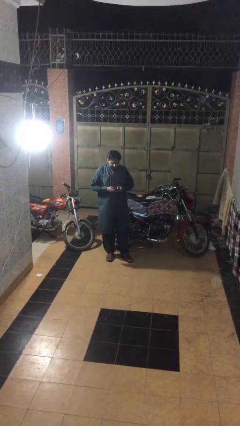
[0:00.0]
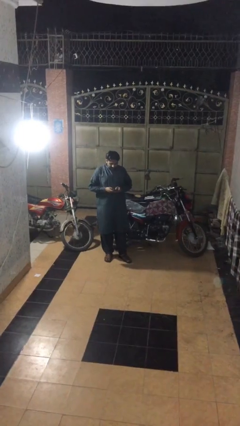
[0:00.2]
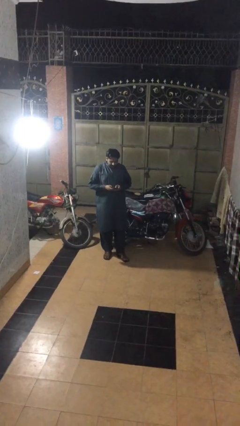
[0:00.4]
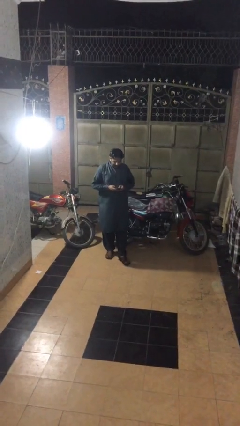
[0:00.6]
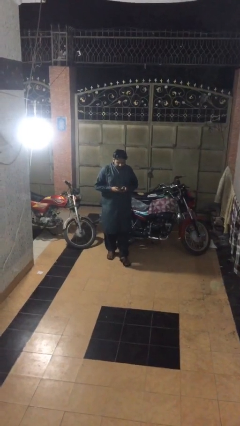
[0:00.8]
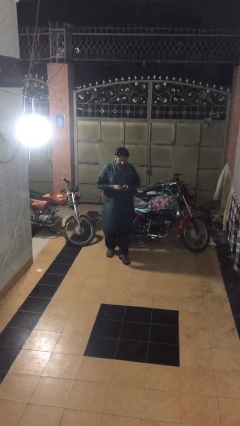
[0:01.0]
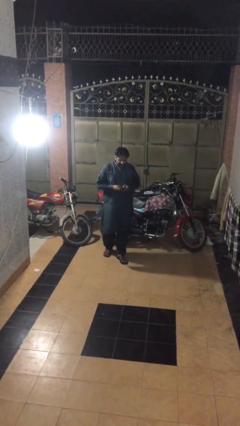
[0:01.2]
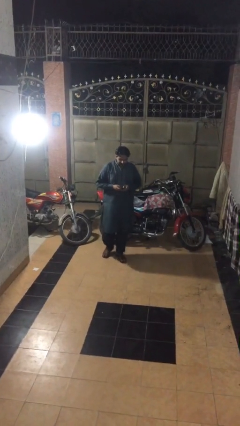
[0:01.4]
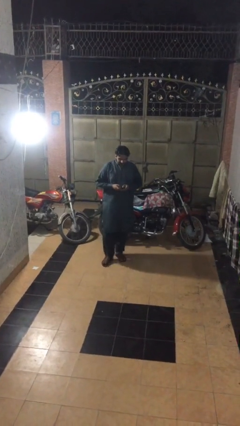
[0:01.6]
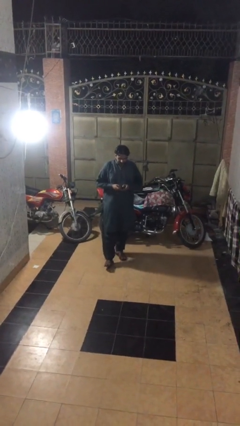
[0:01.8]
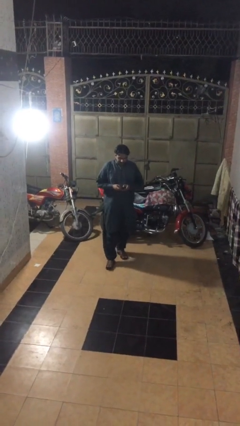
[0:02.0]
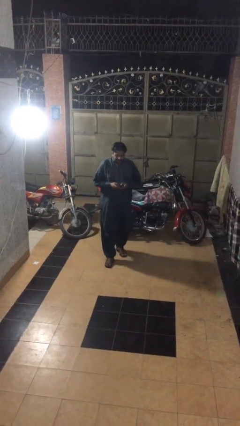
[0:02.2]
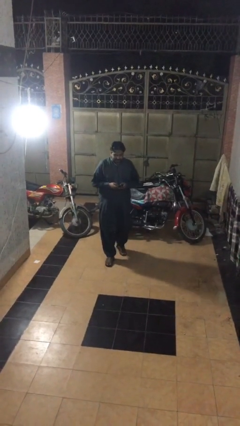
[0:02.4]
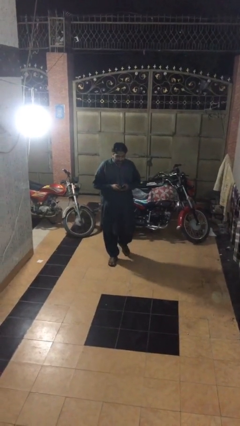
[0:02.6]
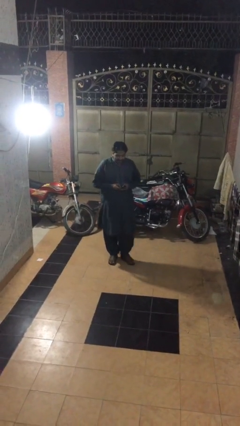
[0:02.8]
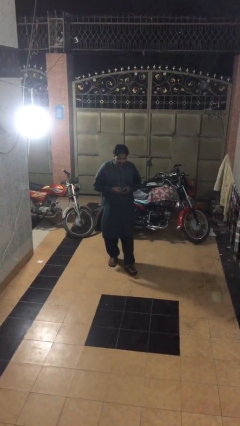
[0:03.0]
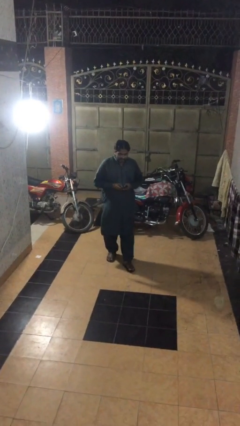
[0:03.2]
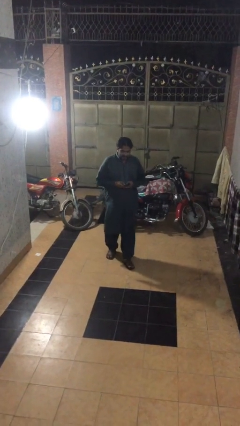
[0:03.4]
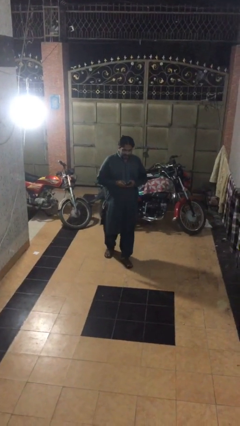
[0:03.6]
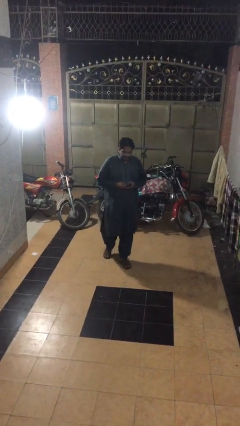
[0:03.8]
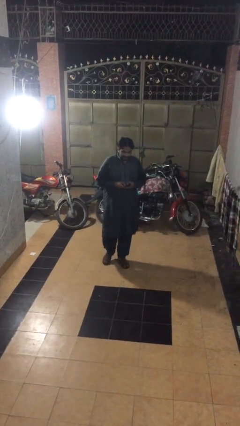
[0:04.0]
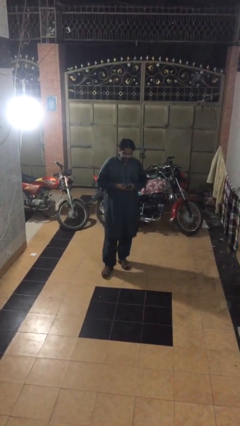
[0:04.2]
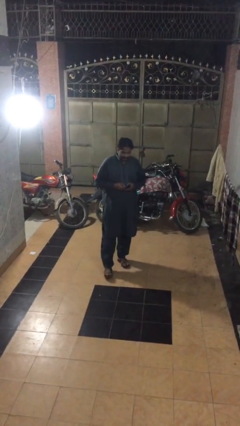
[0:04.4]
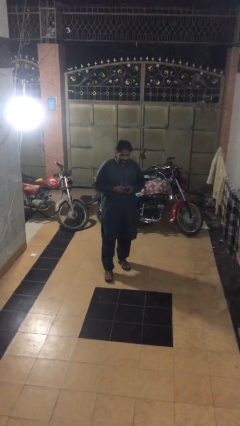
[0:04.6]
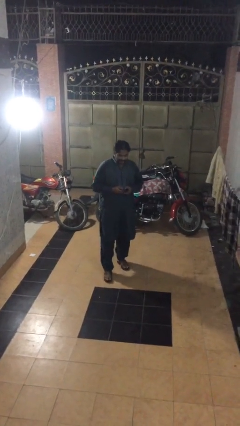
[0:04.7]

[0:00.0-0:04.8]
person texts on phone

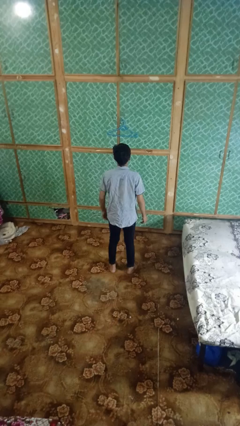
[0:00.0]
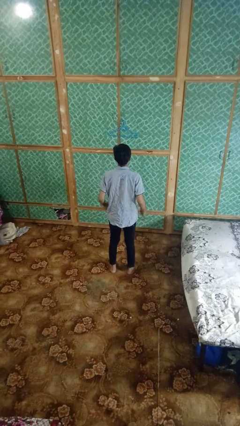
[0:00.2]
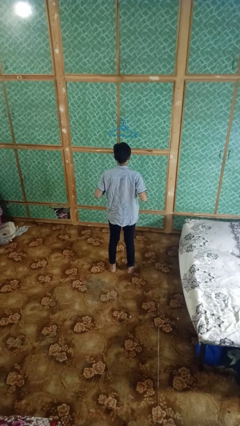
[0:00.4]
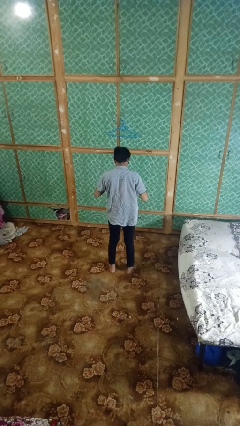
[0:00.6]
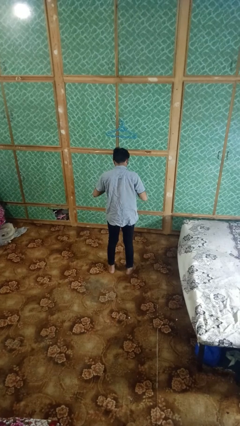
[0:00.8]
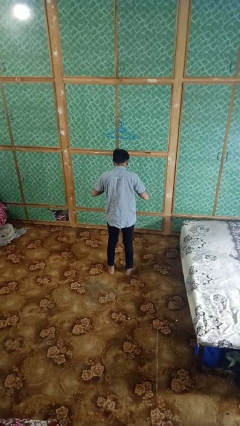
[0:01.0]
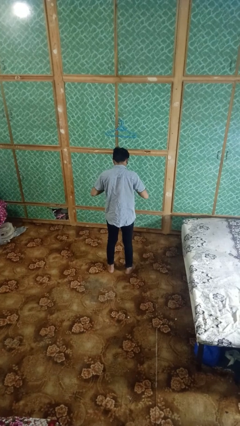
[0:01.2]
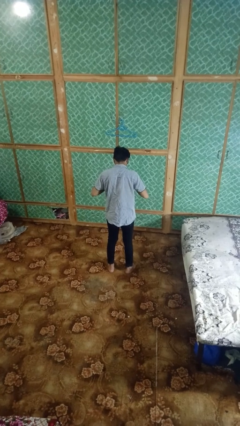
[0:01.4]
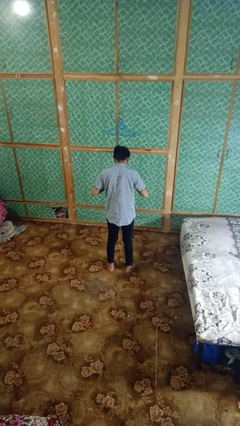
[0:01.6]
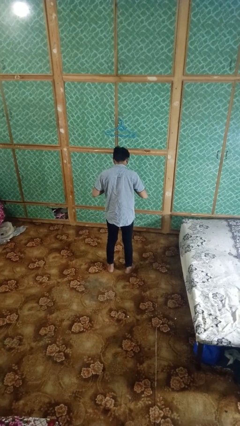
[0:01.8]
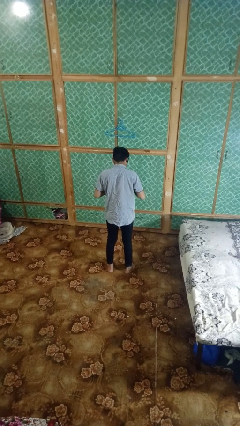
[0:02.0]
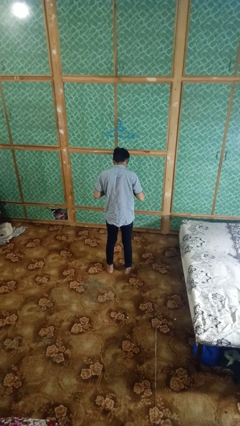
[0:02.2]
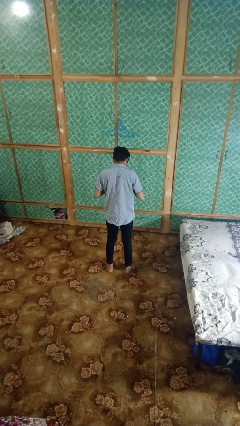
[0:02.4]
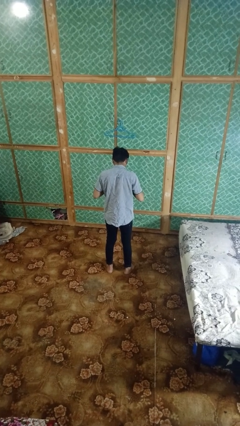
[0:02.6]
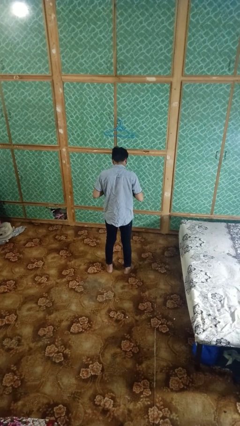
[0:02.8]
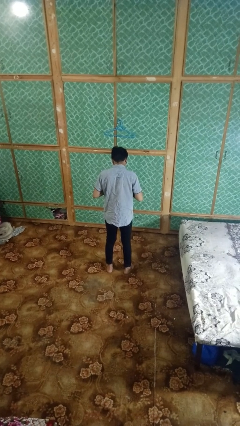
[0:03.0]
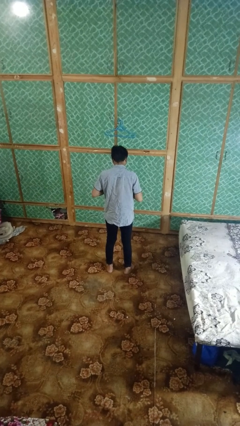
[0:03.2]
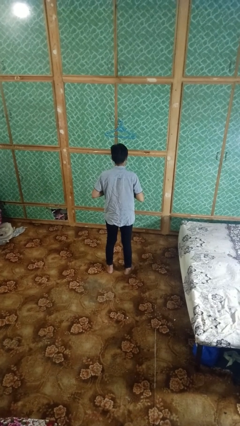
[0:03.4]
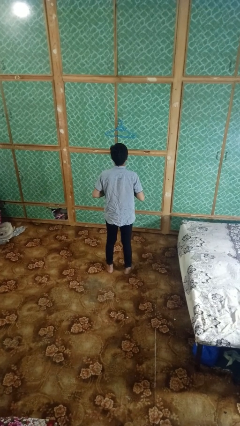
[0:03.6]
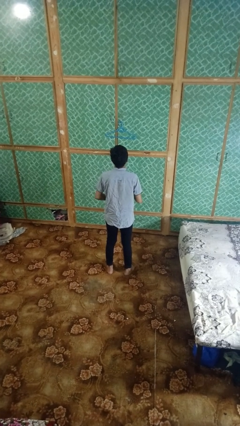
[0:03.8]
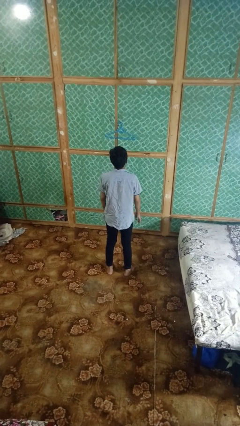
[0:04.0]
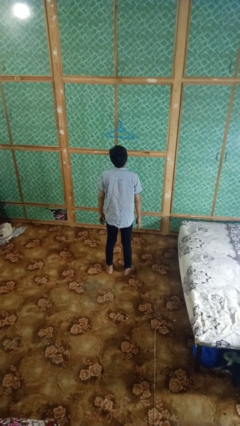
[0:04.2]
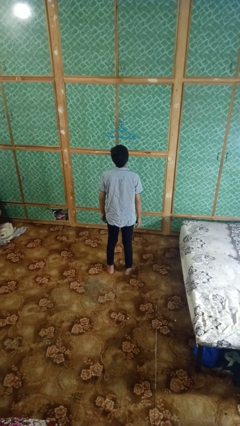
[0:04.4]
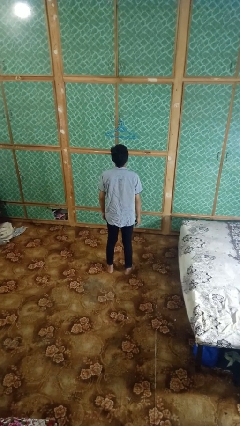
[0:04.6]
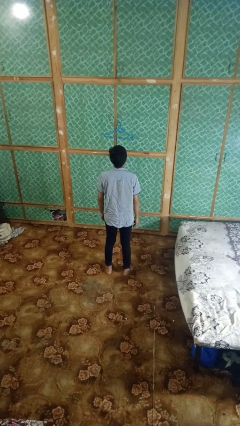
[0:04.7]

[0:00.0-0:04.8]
person buttons shirt

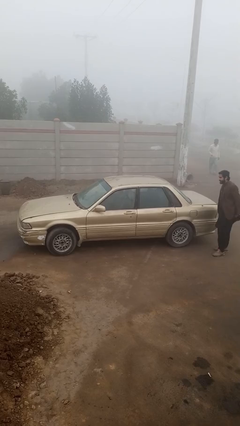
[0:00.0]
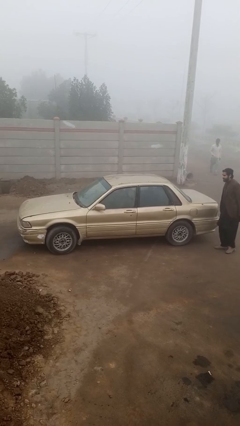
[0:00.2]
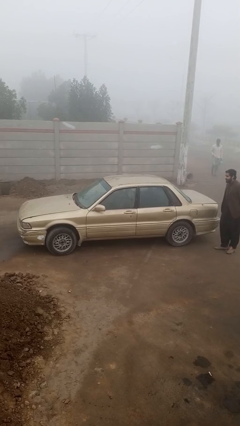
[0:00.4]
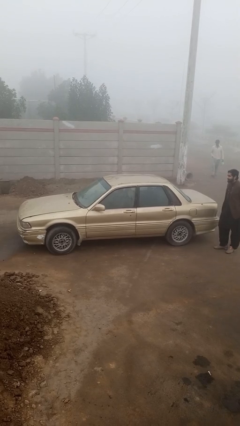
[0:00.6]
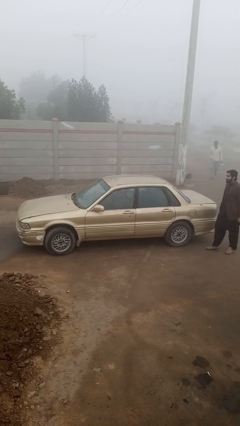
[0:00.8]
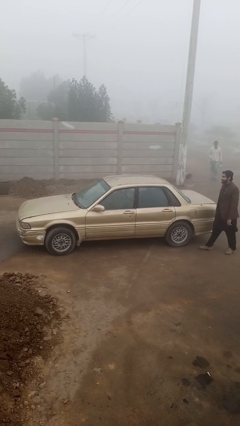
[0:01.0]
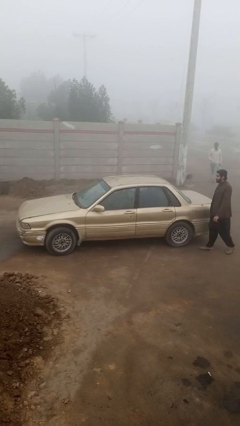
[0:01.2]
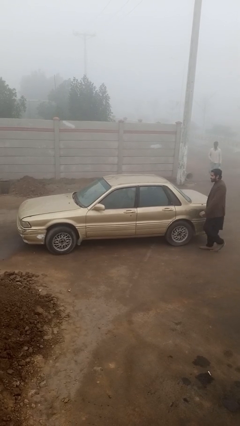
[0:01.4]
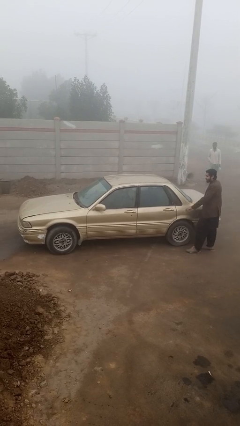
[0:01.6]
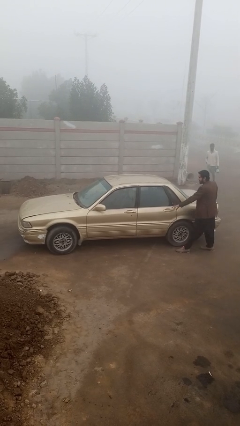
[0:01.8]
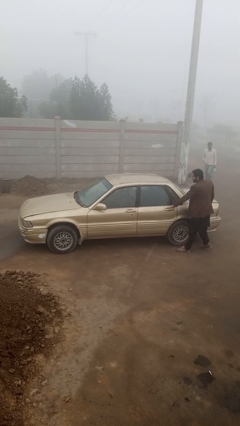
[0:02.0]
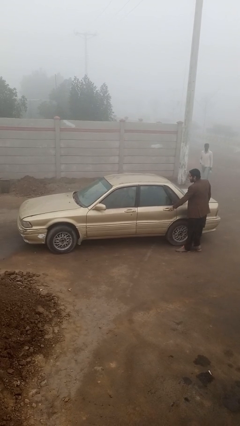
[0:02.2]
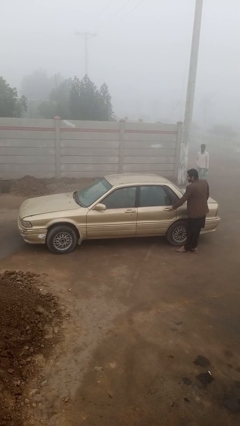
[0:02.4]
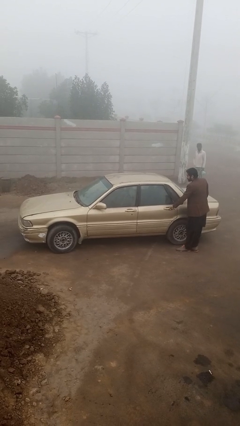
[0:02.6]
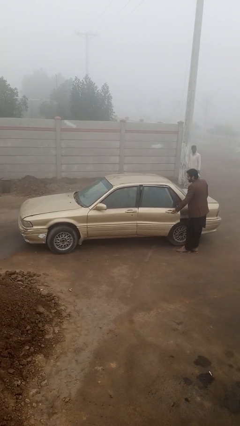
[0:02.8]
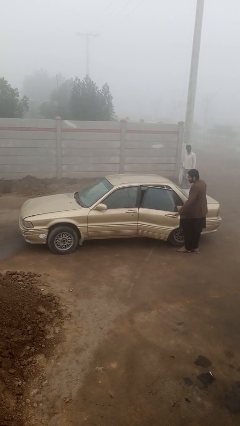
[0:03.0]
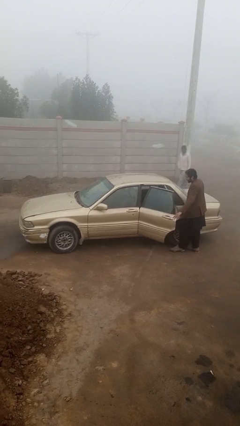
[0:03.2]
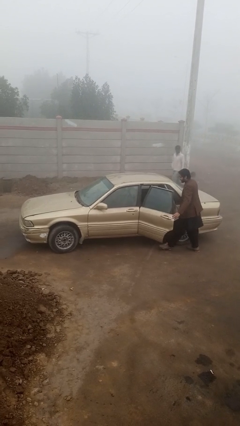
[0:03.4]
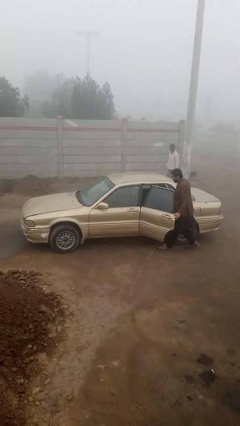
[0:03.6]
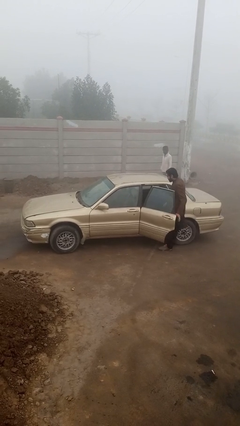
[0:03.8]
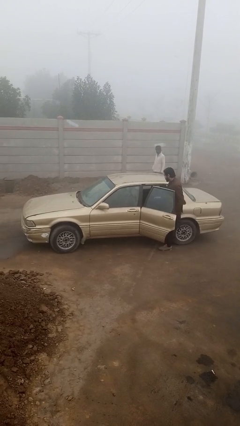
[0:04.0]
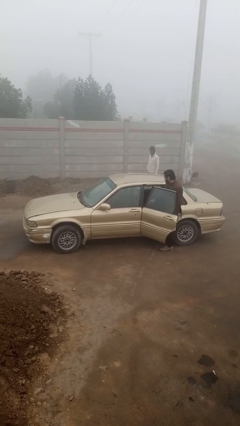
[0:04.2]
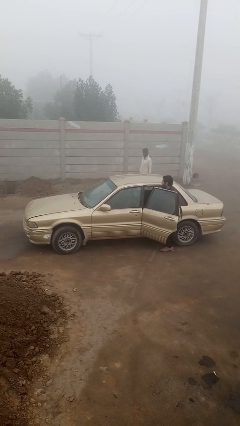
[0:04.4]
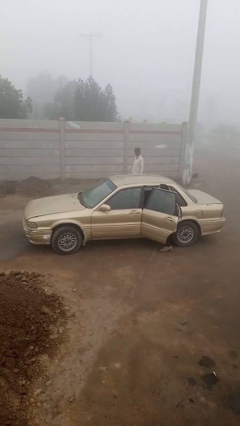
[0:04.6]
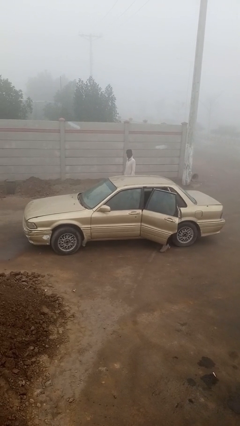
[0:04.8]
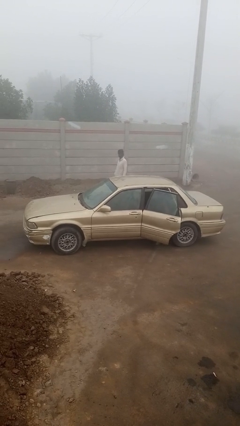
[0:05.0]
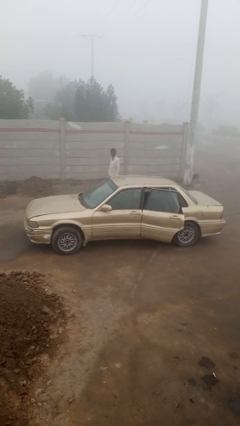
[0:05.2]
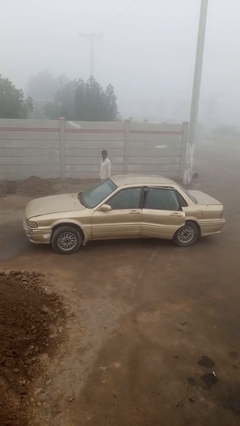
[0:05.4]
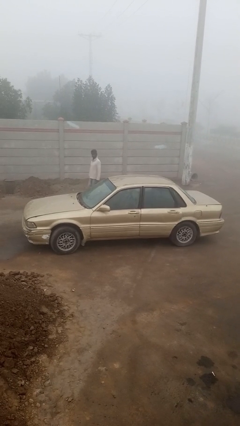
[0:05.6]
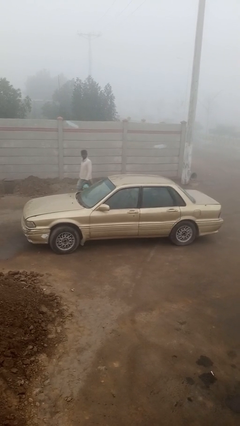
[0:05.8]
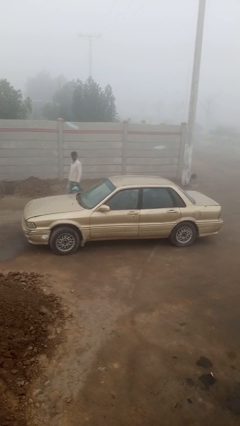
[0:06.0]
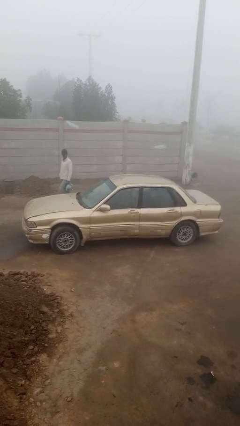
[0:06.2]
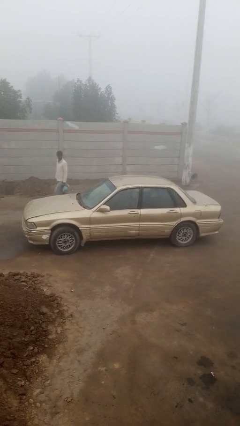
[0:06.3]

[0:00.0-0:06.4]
car picks up person

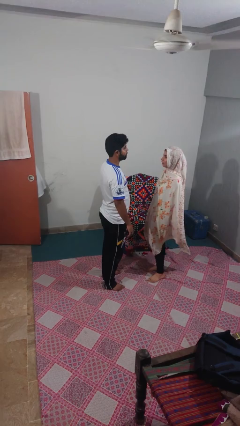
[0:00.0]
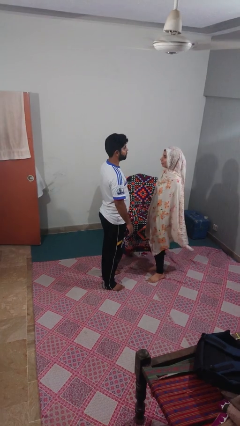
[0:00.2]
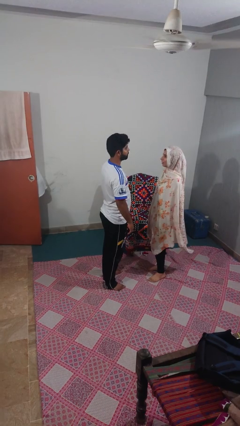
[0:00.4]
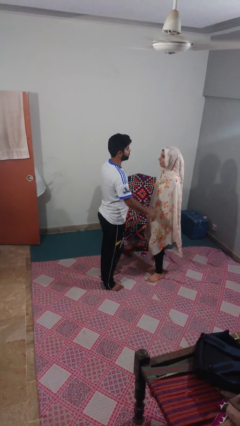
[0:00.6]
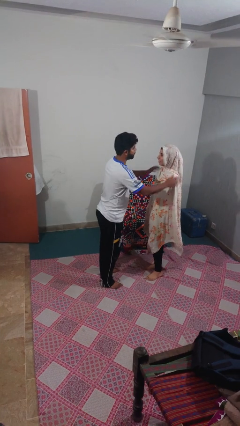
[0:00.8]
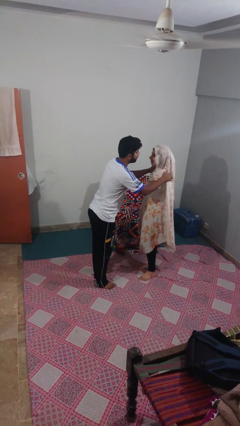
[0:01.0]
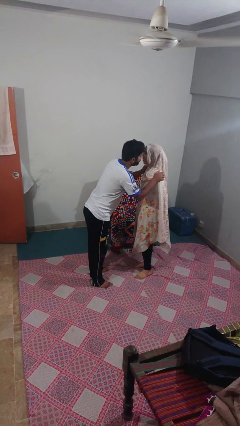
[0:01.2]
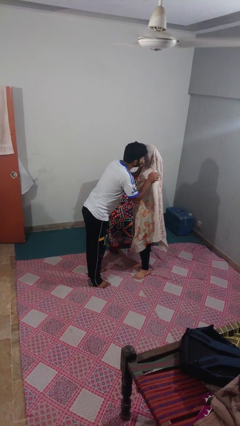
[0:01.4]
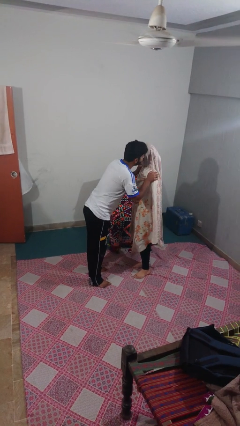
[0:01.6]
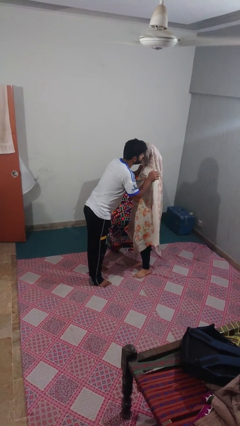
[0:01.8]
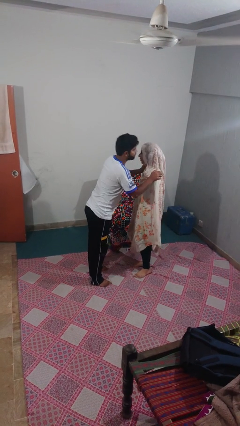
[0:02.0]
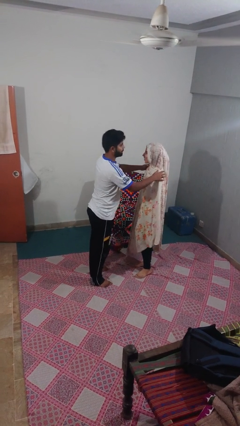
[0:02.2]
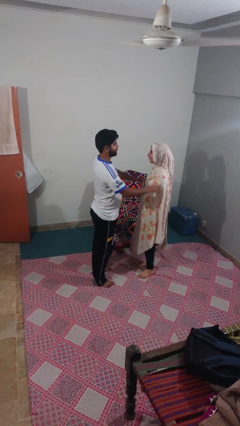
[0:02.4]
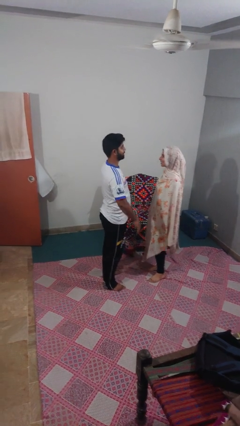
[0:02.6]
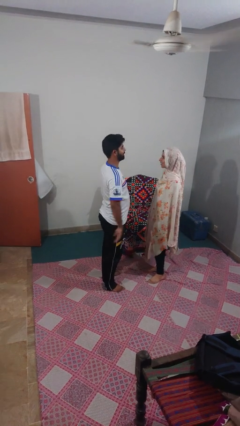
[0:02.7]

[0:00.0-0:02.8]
person kisses cheek of person
